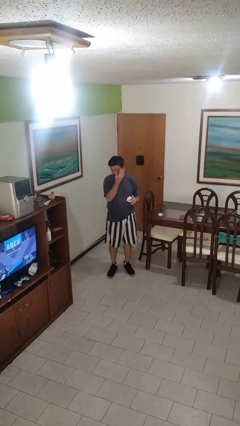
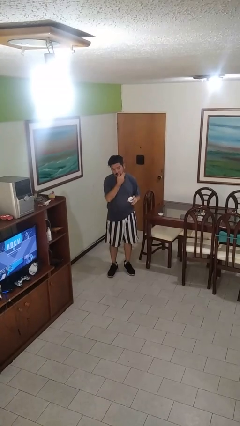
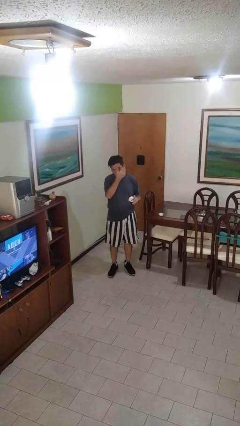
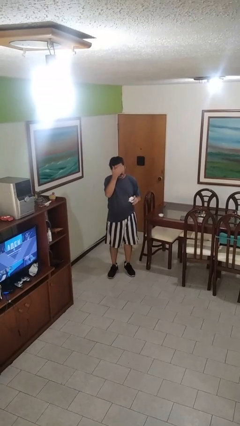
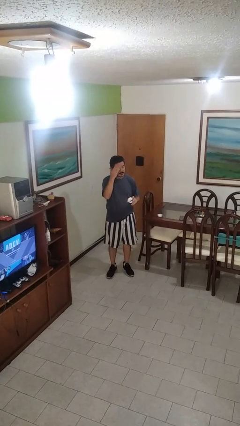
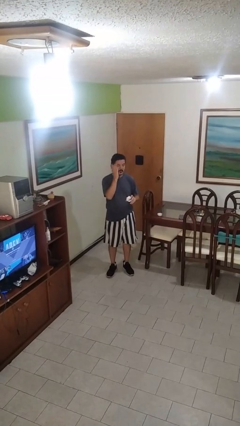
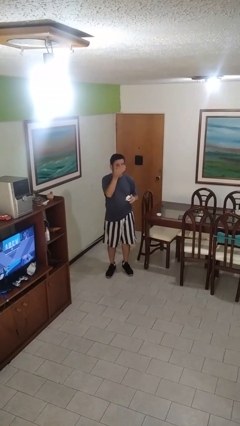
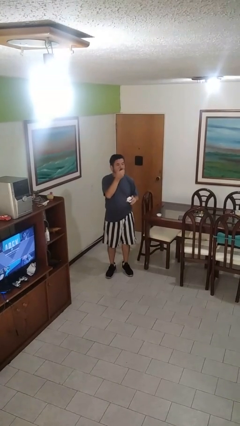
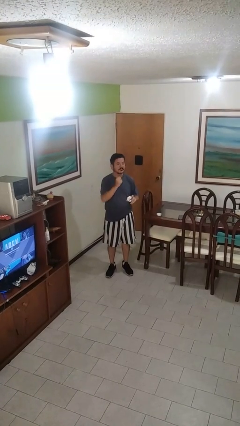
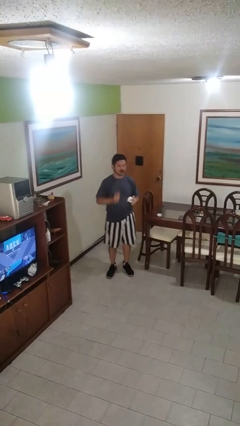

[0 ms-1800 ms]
person applies facial moisturizer

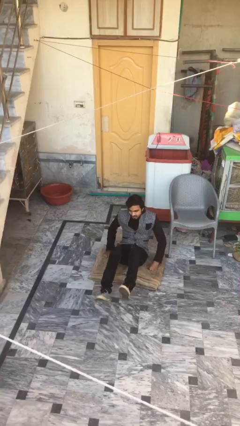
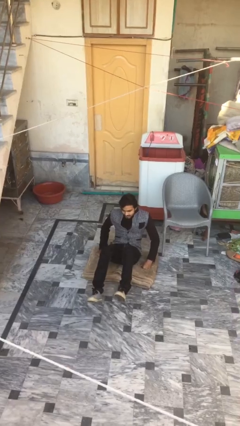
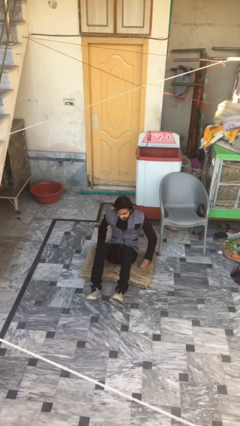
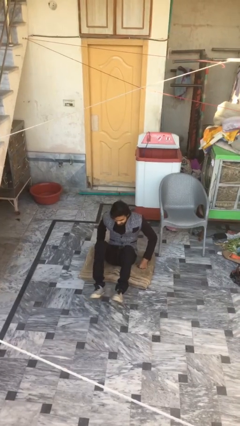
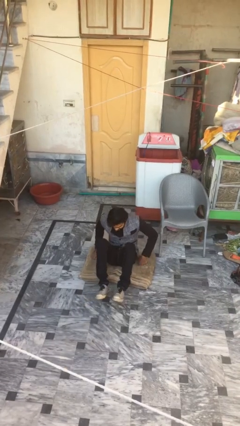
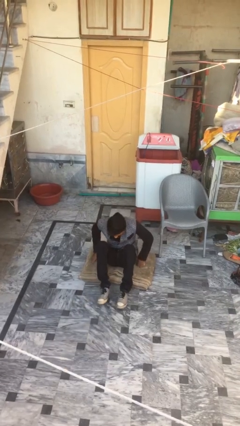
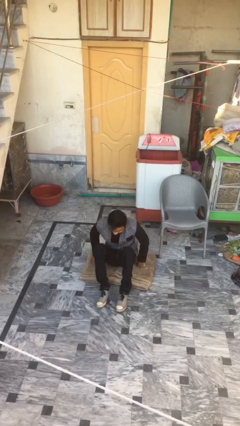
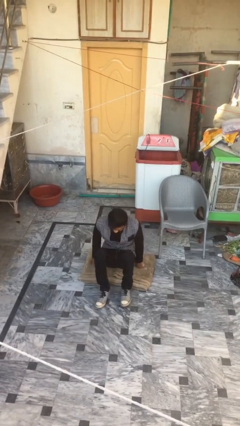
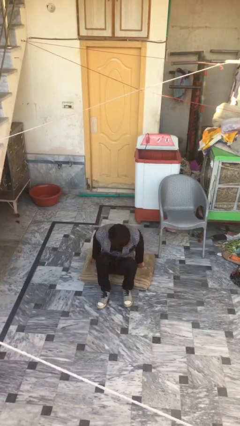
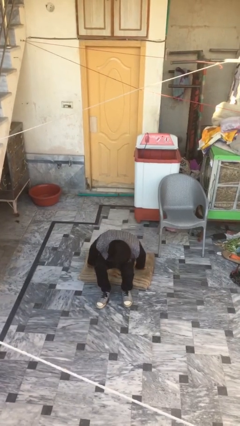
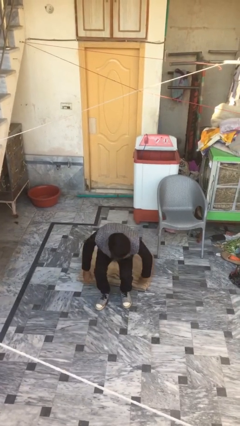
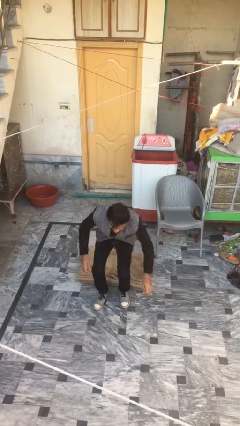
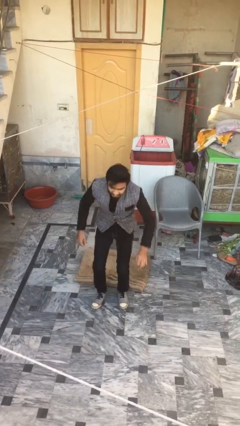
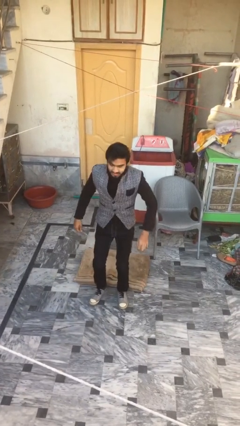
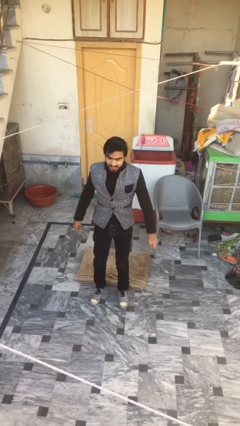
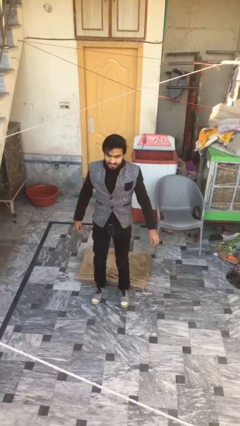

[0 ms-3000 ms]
person stands up

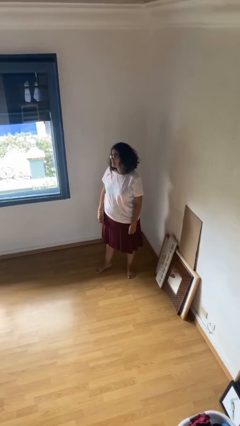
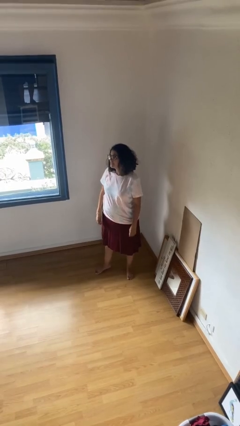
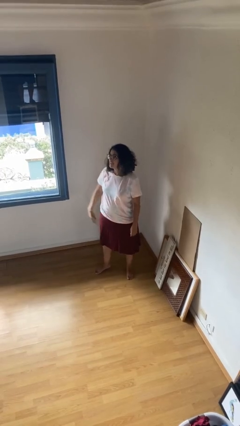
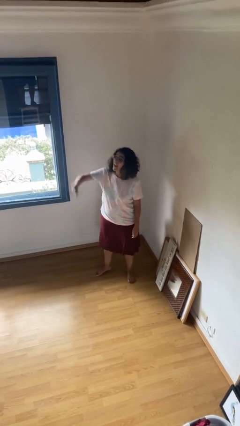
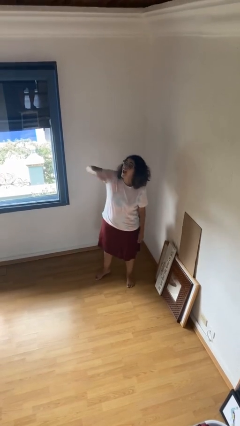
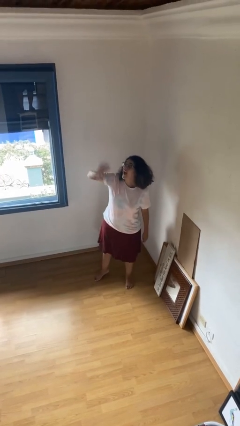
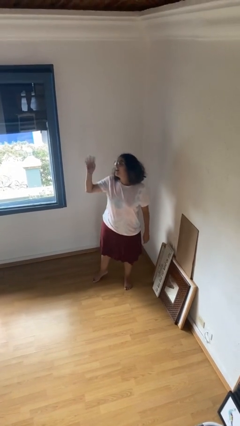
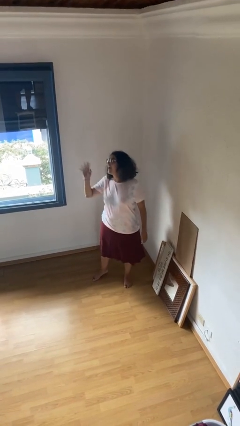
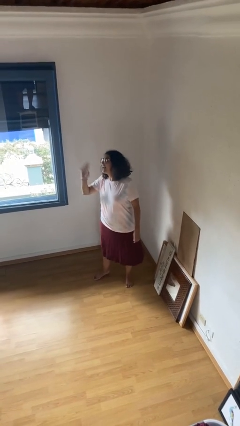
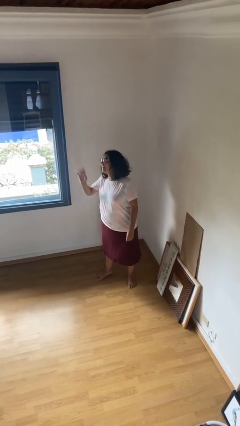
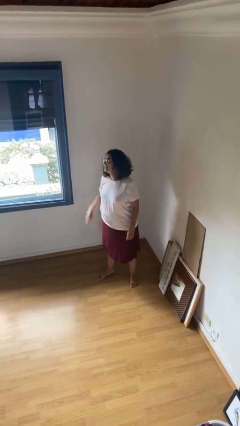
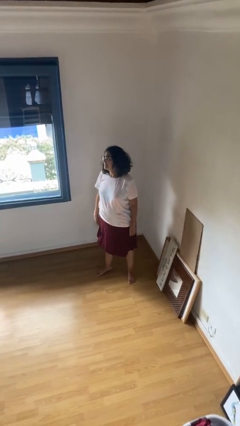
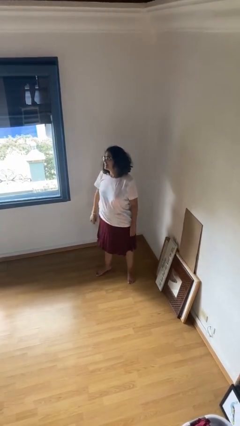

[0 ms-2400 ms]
person waves at person

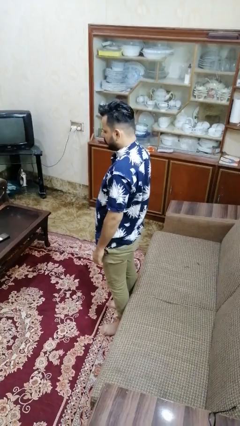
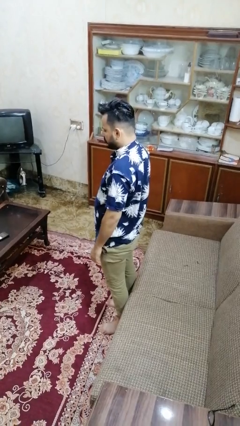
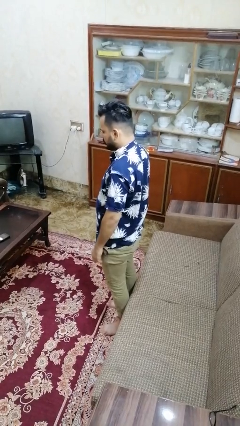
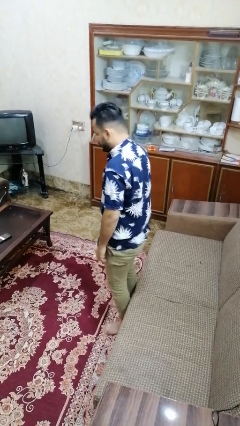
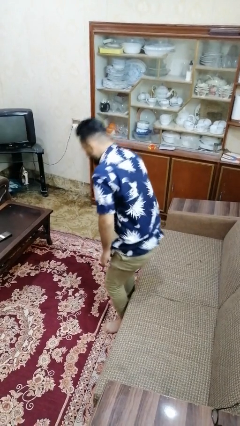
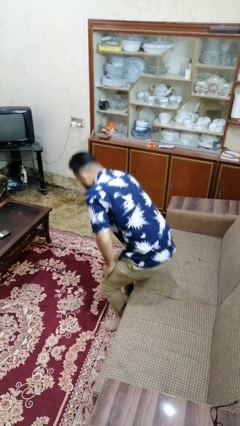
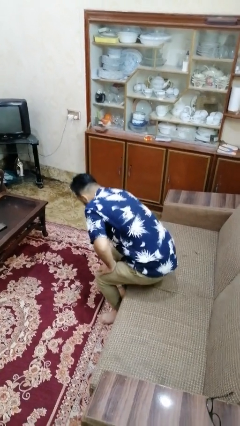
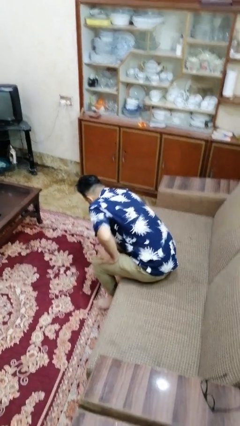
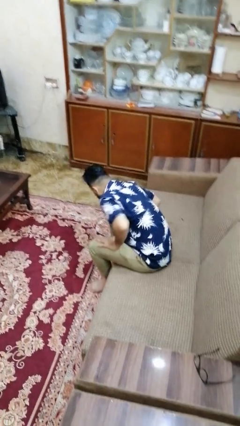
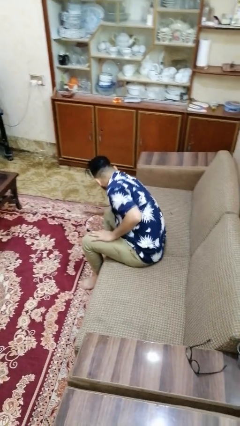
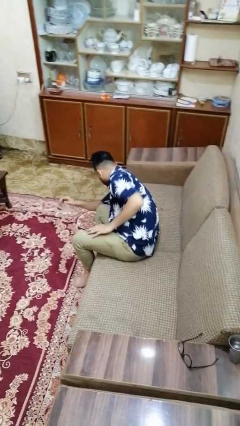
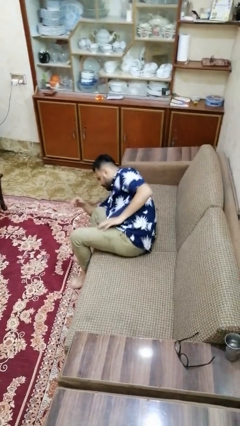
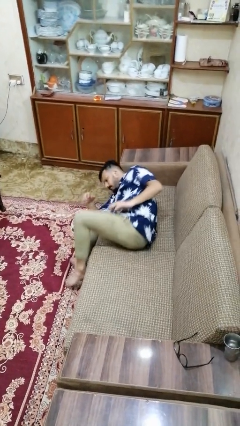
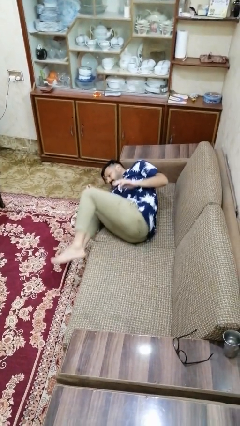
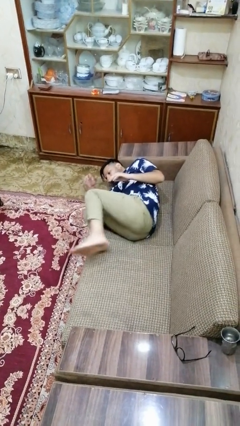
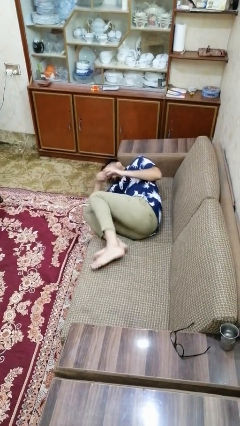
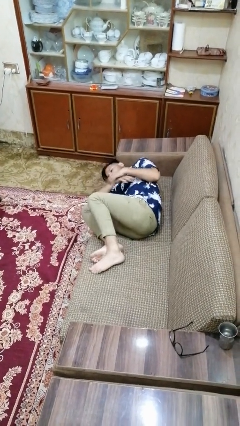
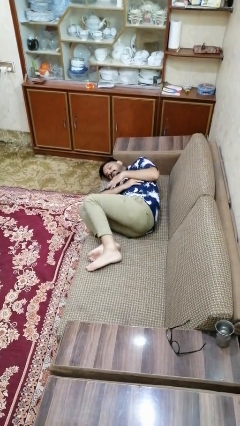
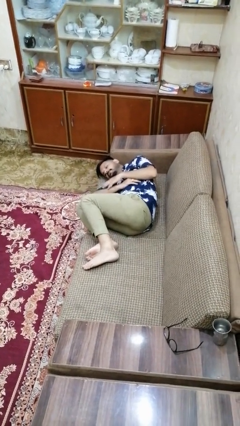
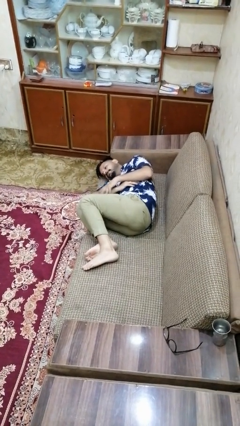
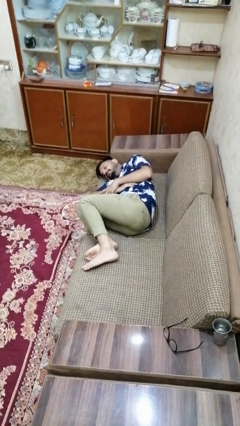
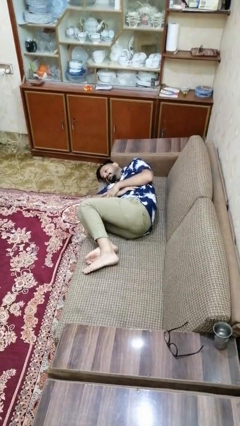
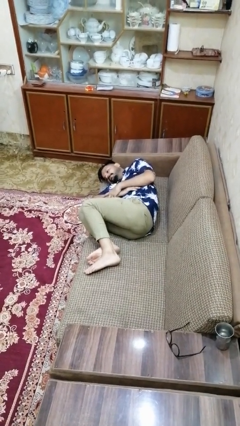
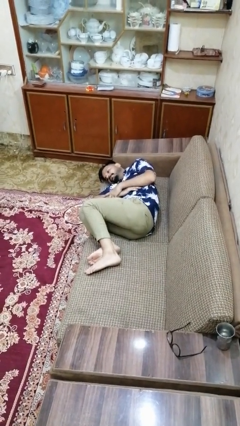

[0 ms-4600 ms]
person lies down on couch

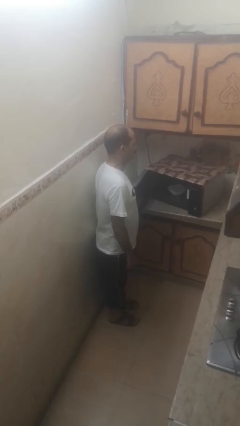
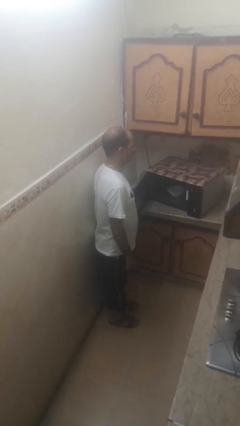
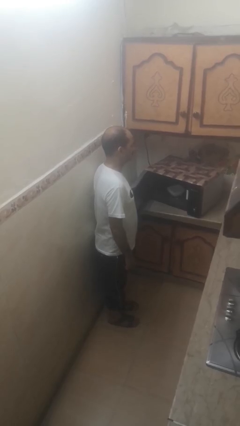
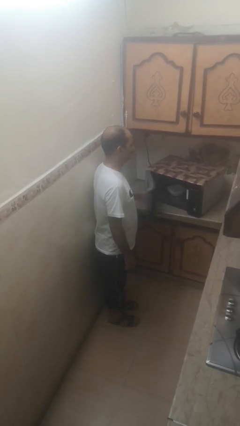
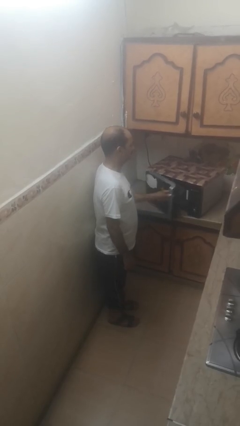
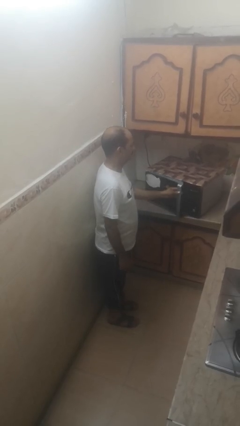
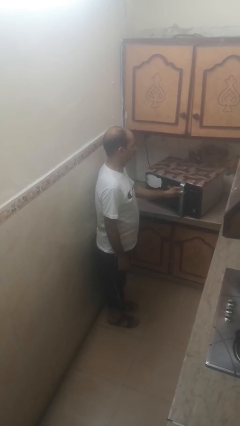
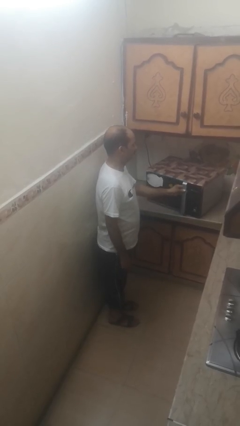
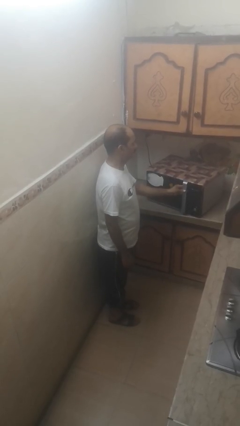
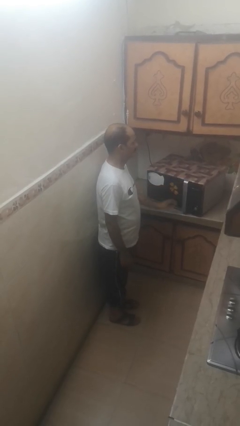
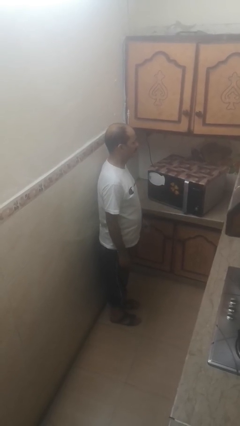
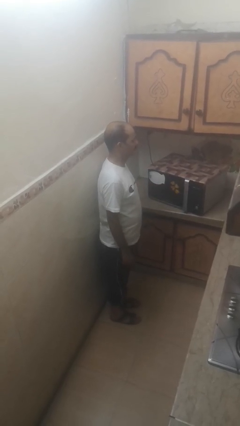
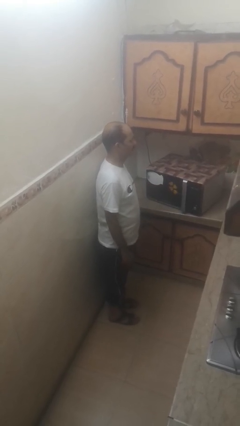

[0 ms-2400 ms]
person closes microwave

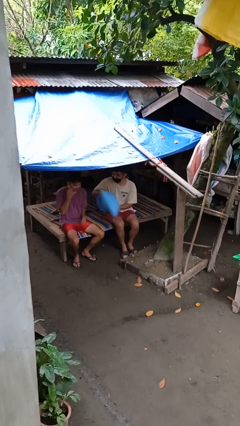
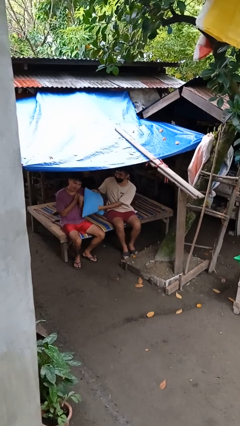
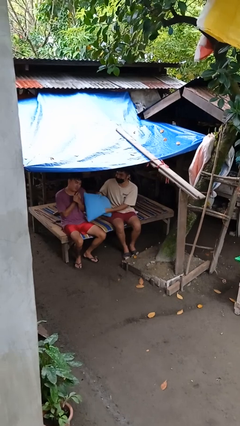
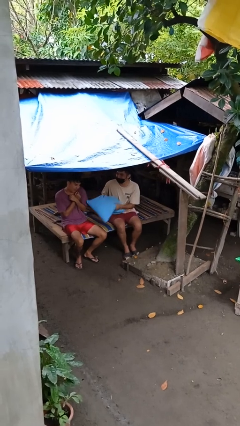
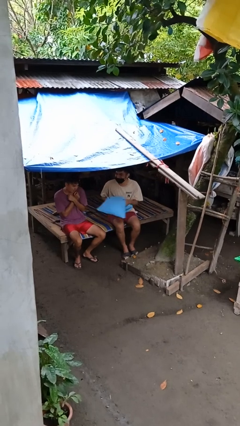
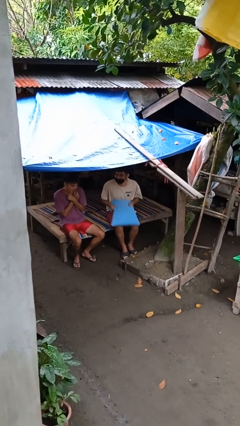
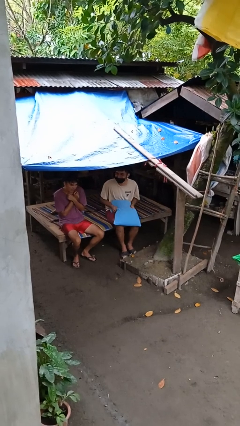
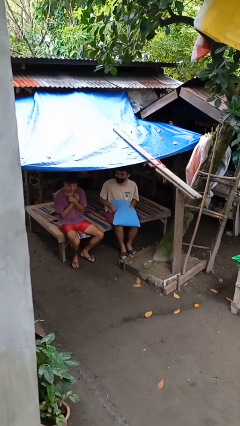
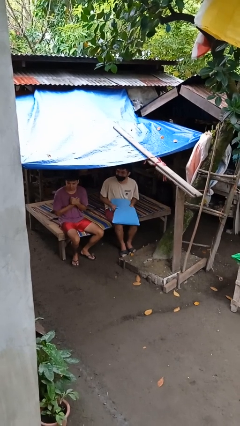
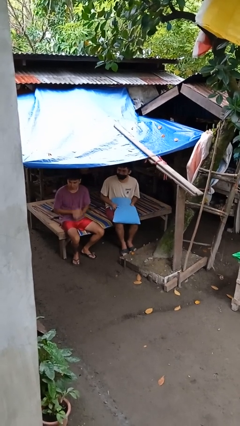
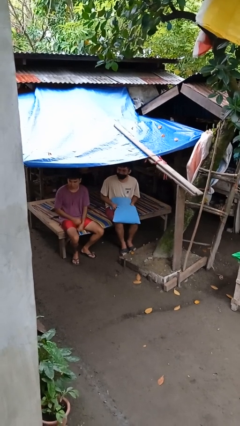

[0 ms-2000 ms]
person hits person with pillow

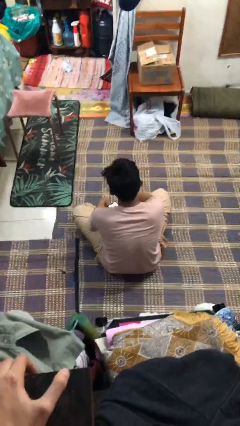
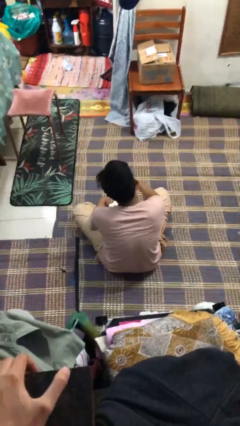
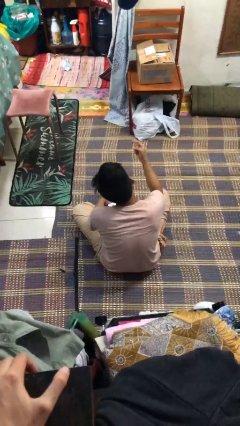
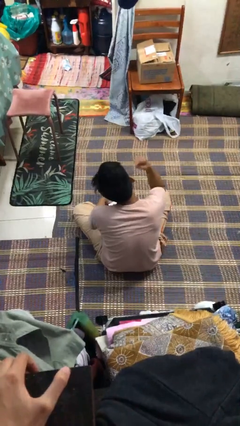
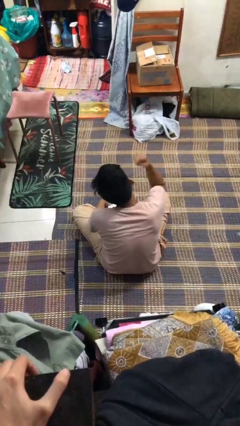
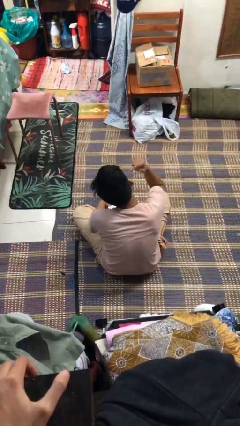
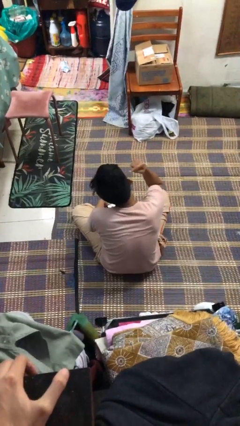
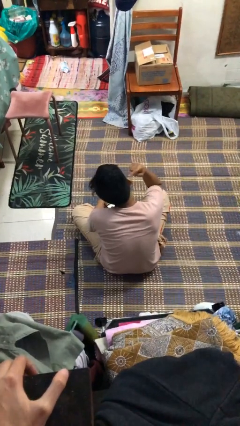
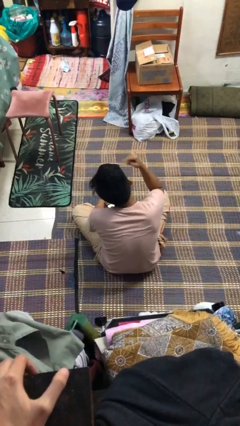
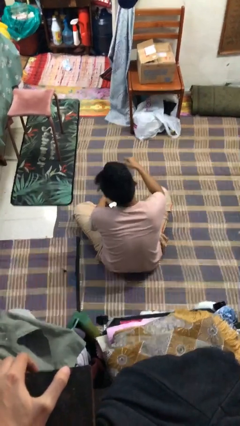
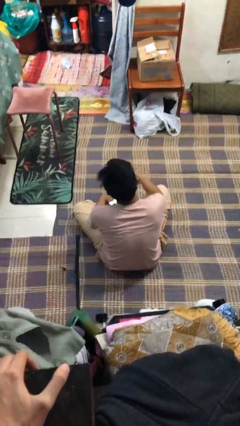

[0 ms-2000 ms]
person gestures listen closely
